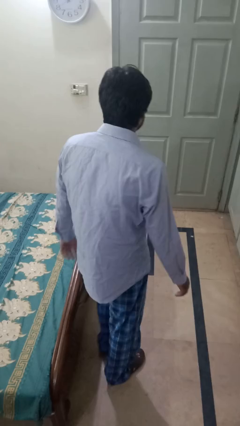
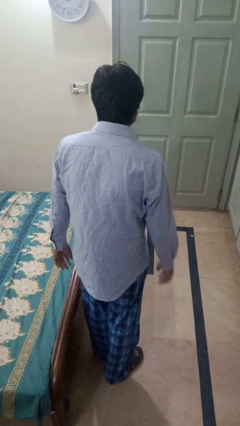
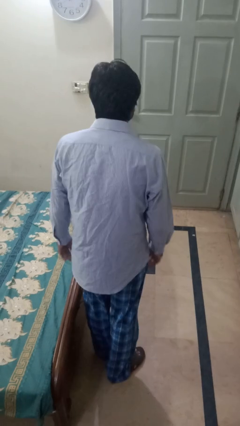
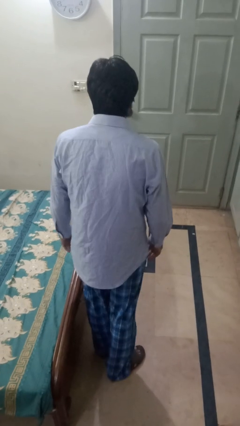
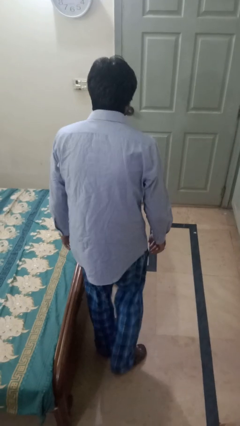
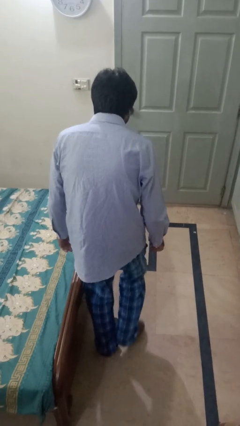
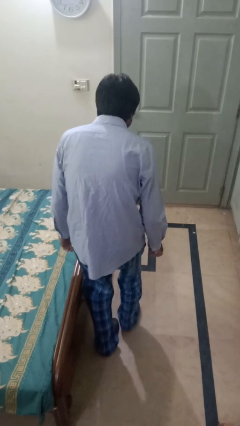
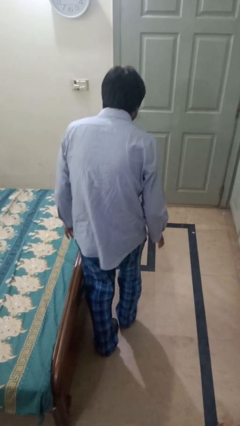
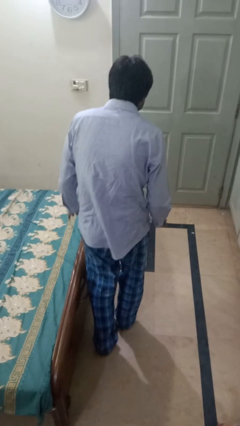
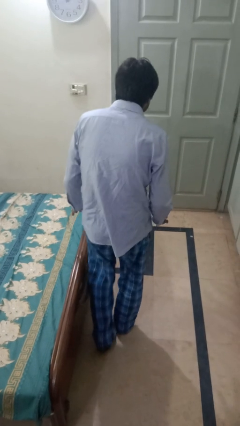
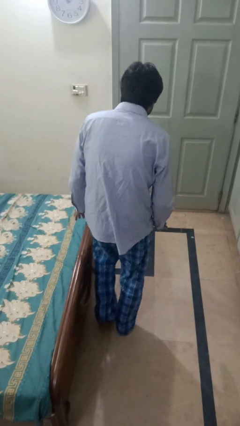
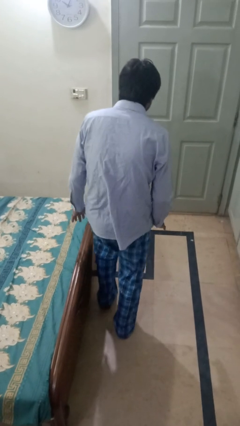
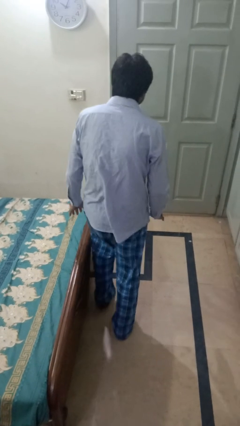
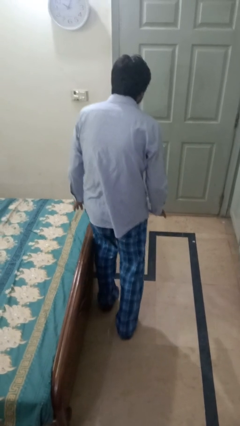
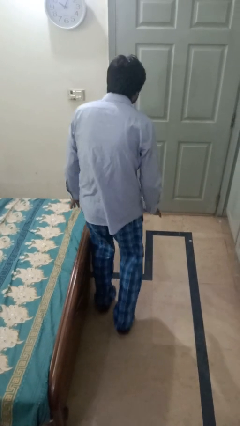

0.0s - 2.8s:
person walks tiptoe

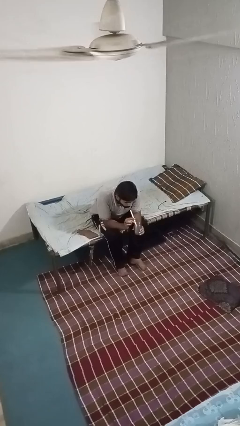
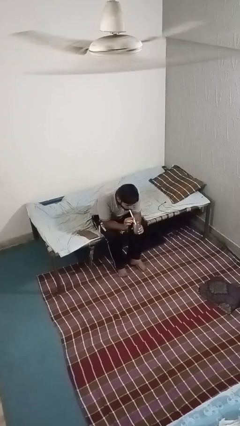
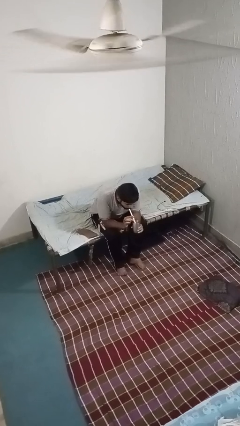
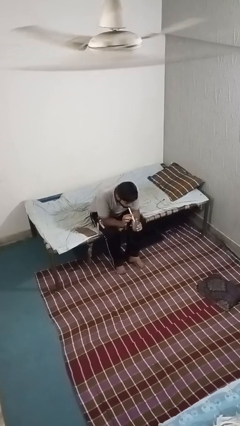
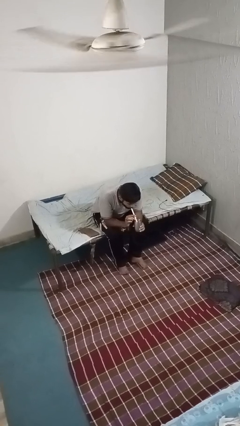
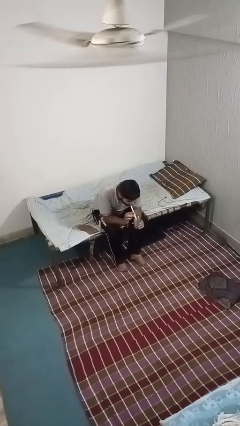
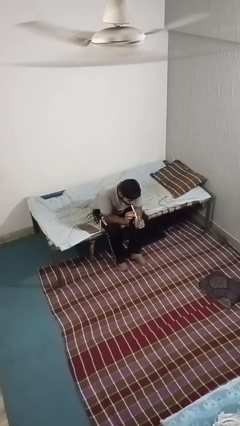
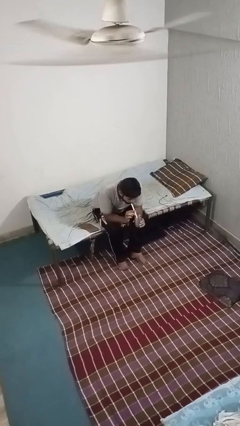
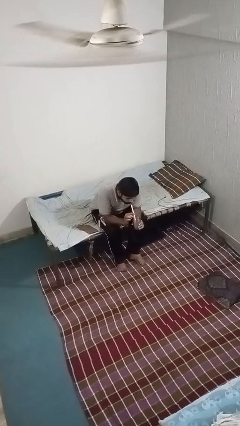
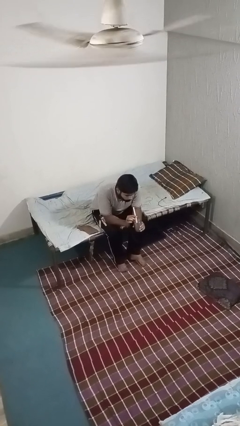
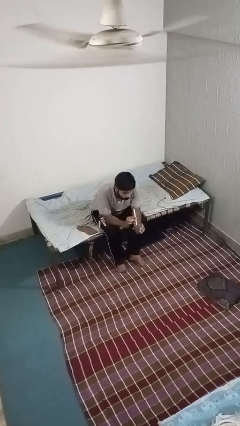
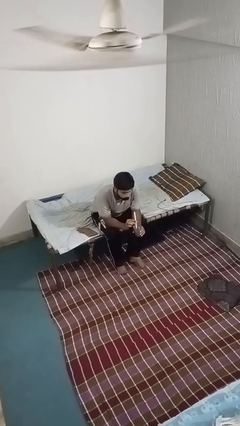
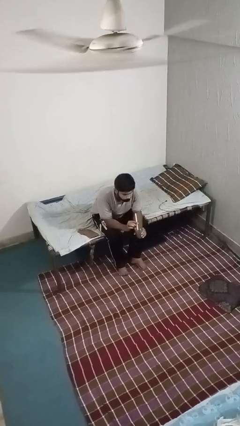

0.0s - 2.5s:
person drinks from straw

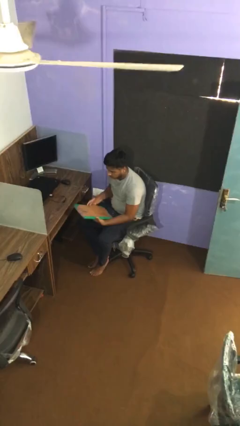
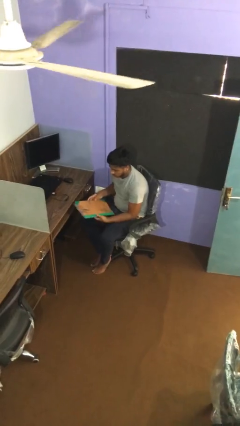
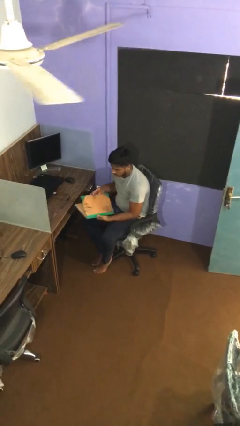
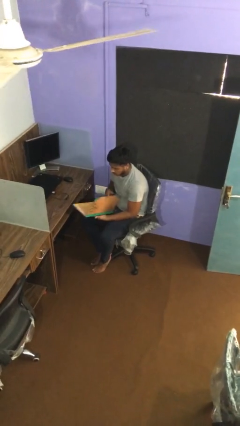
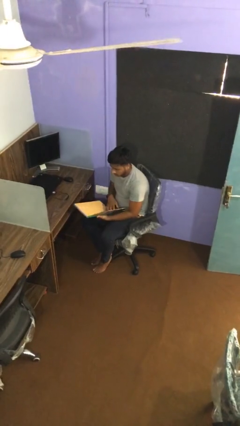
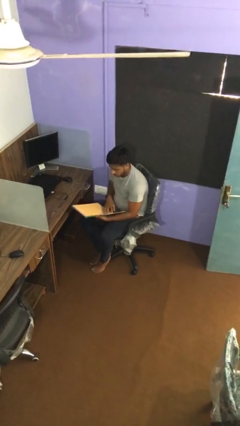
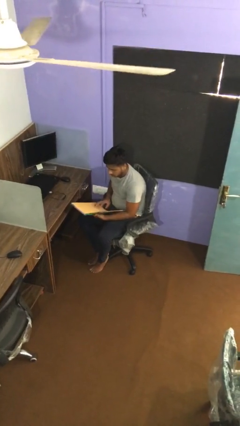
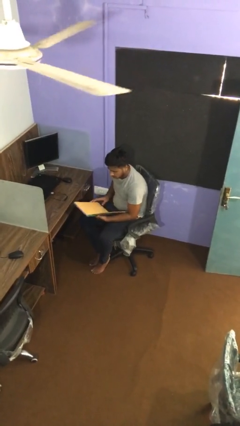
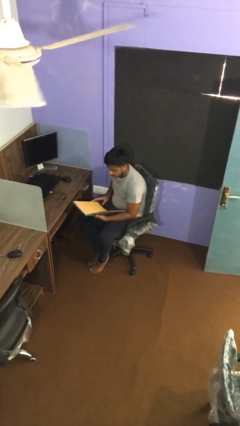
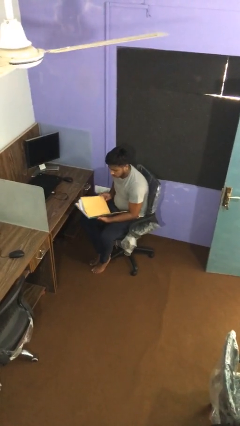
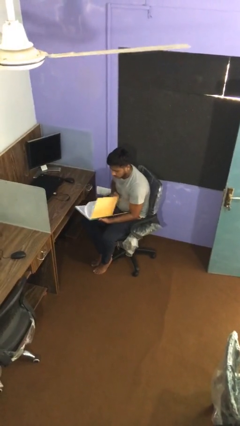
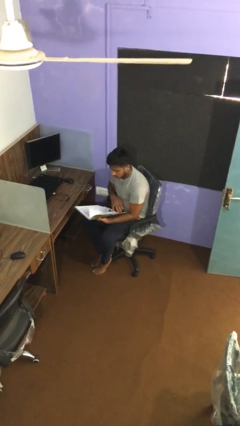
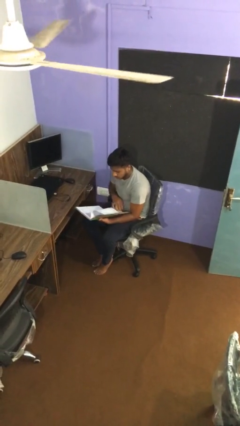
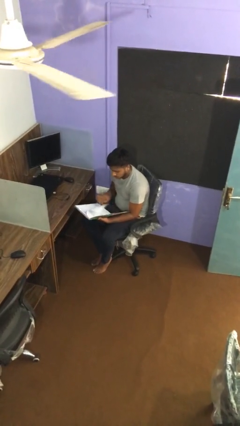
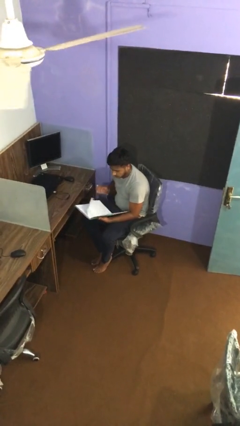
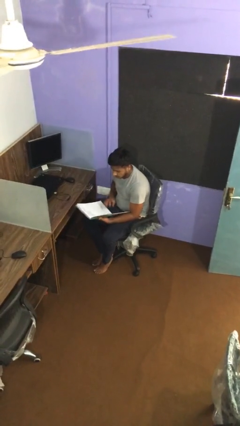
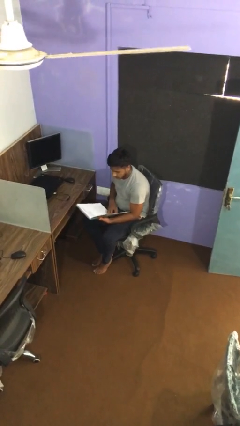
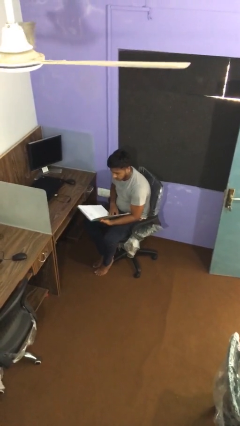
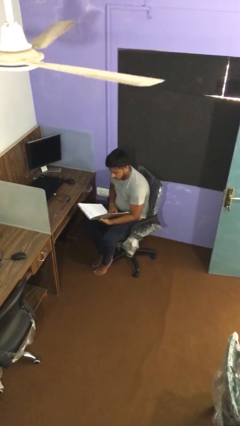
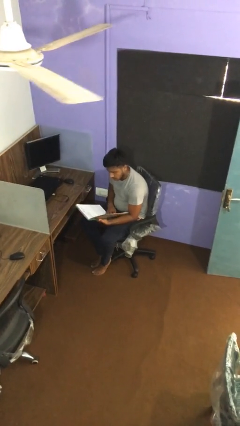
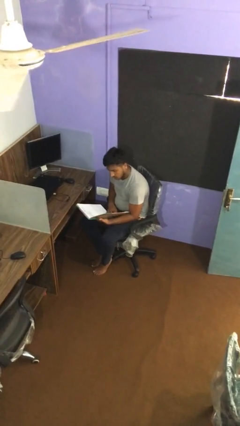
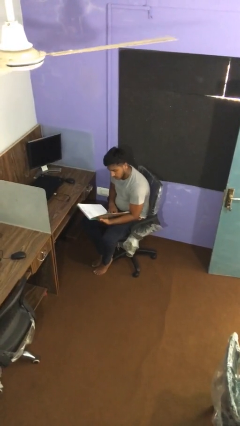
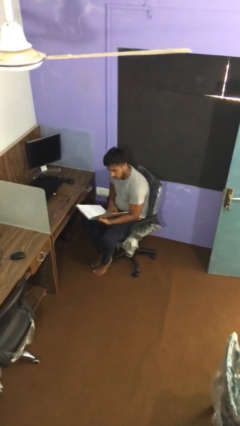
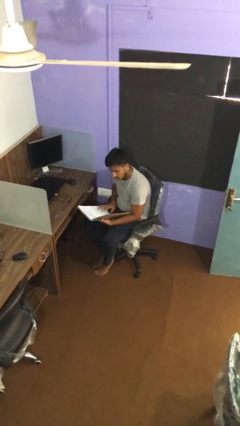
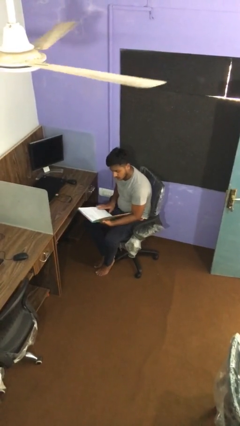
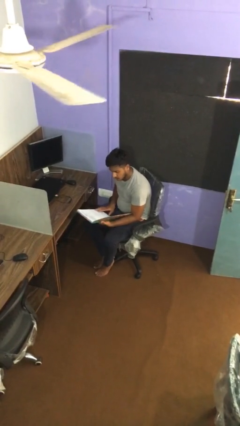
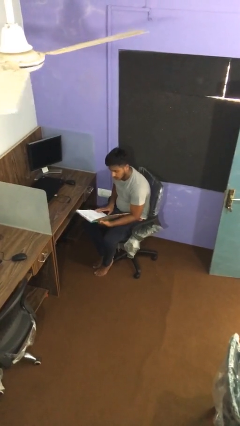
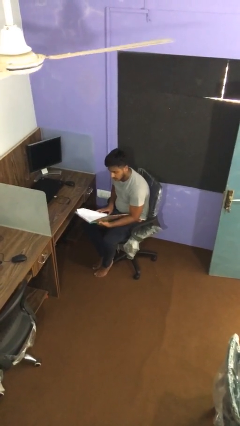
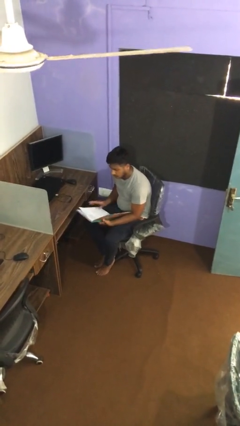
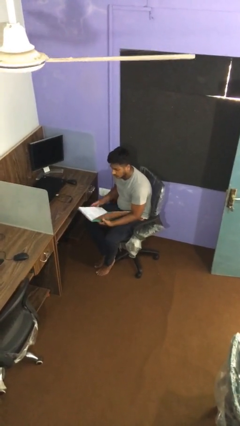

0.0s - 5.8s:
person reads document

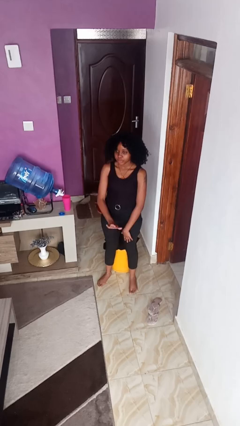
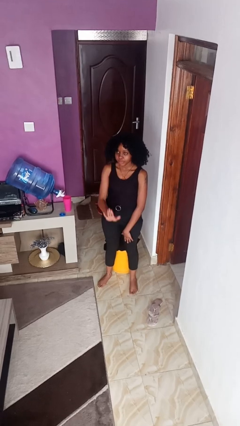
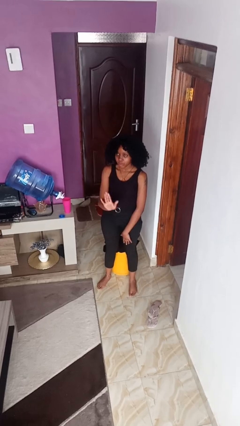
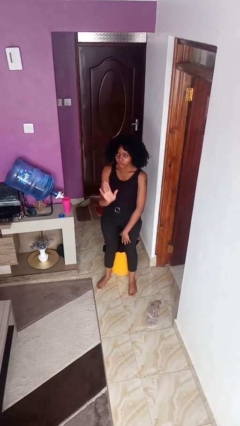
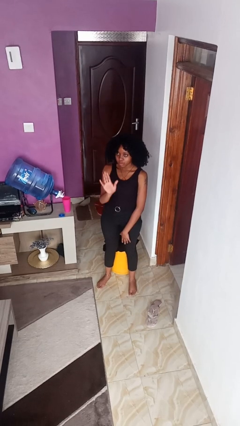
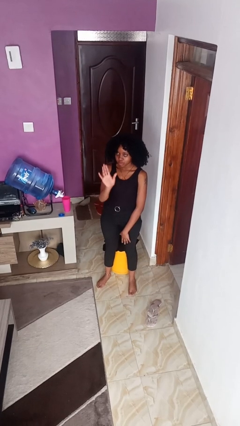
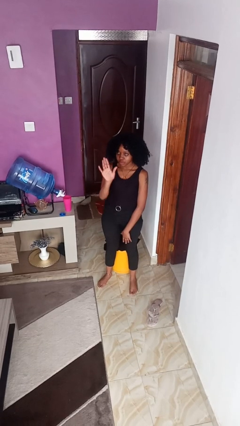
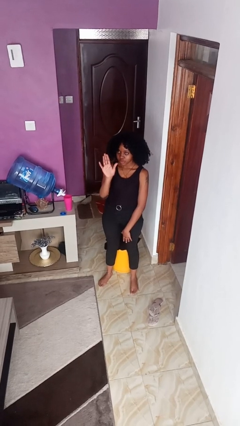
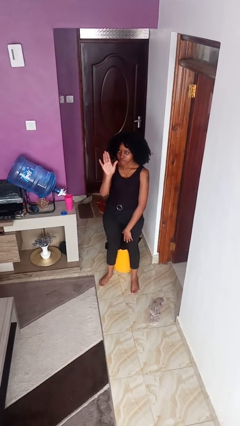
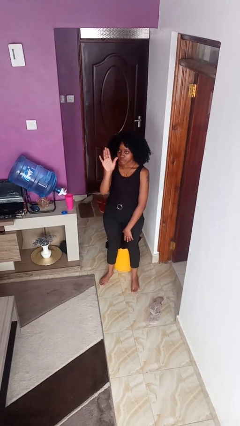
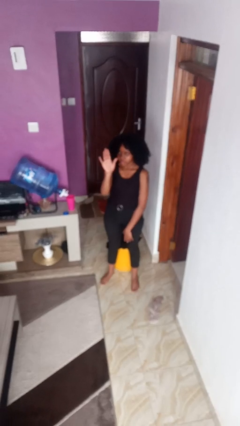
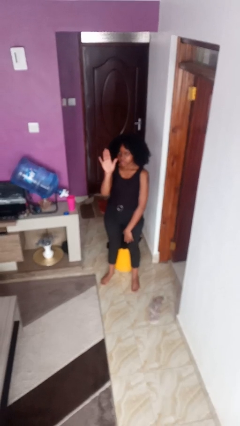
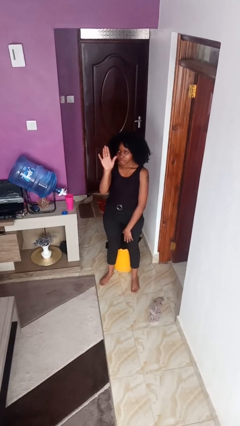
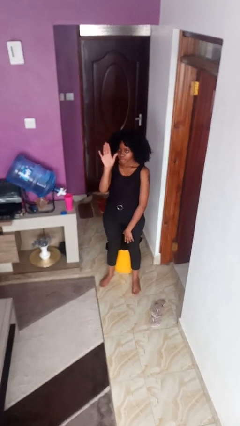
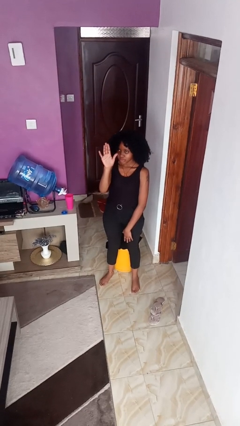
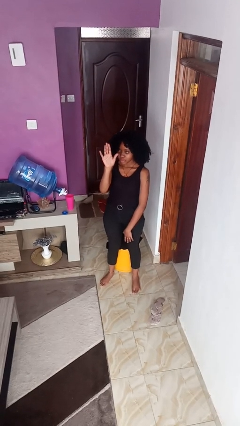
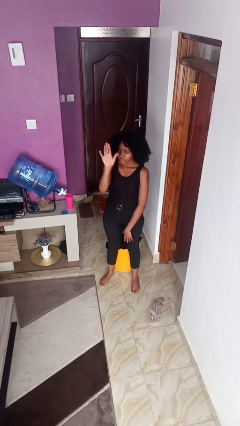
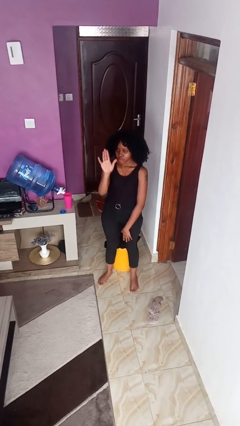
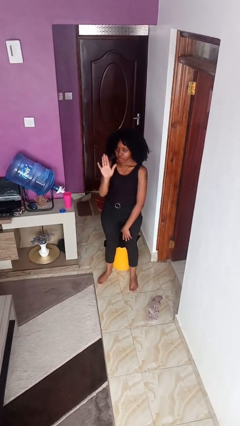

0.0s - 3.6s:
person gestures swipe up

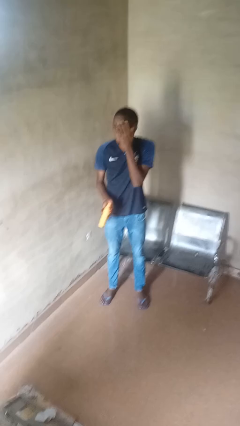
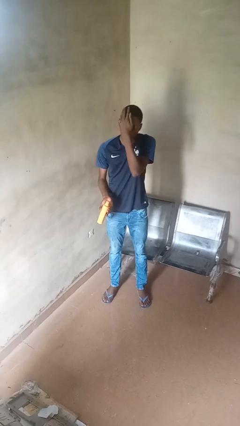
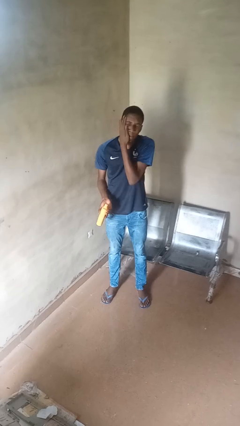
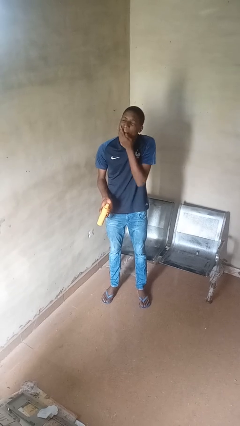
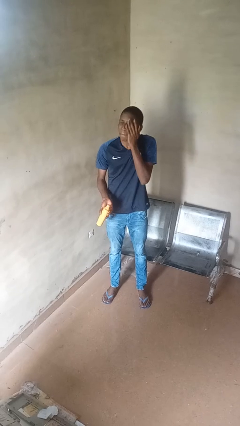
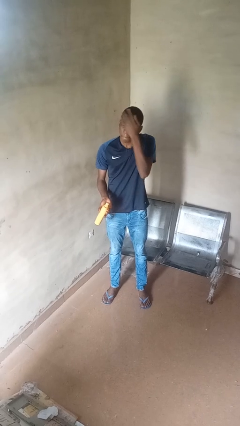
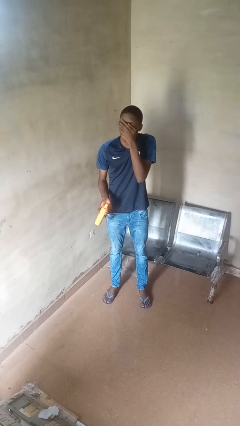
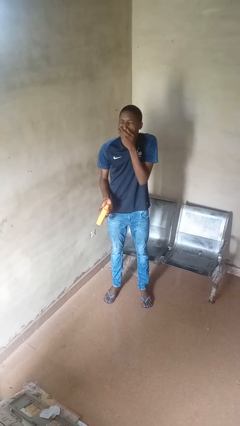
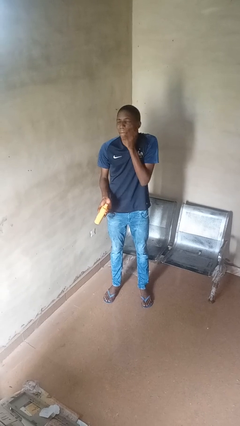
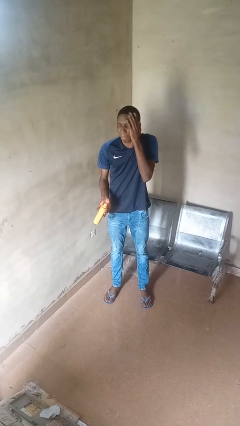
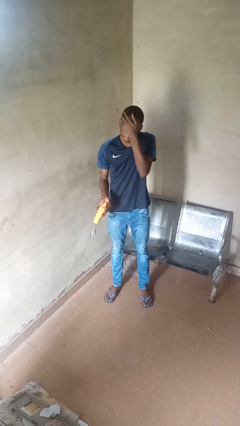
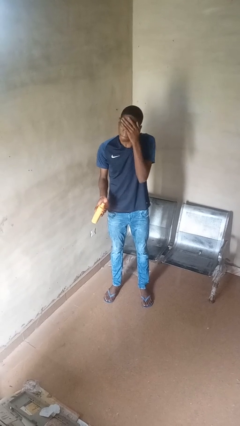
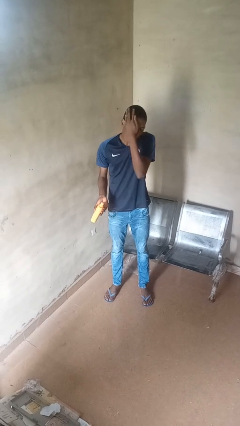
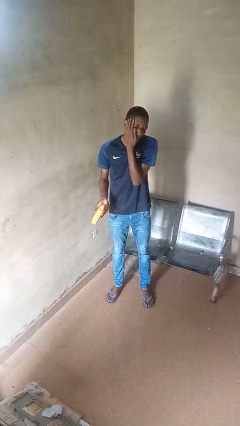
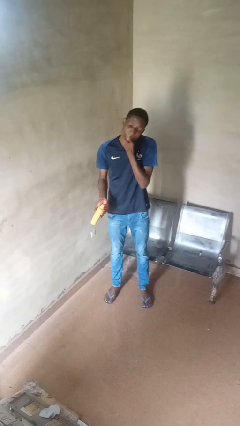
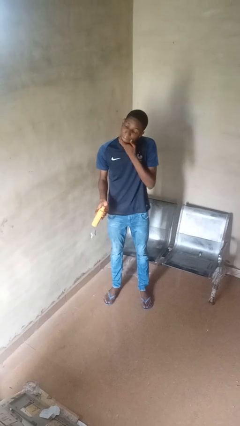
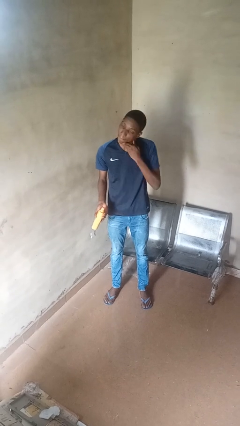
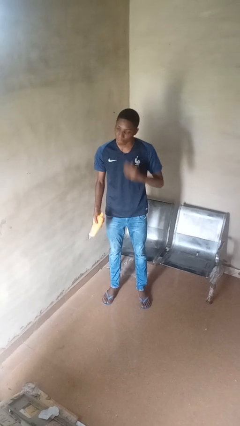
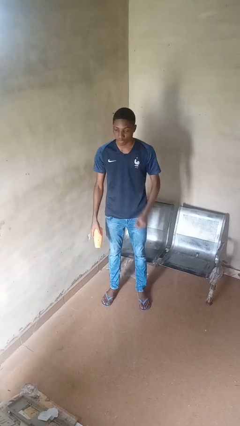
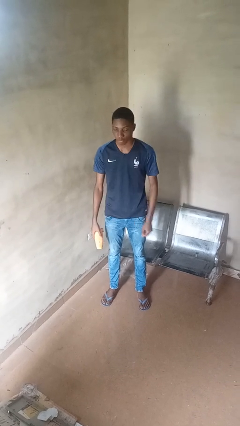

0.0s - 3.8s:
person applies sunscreen
